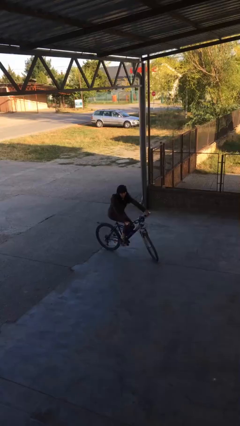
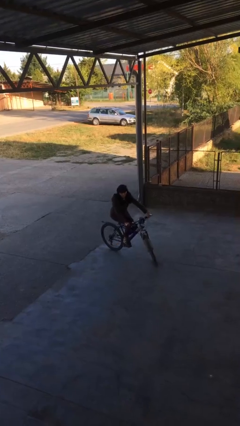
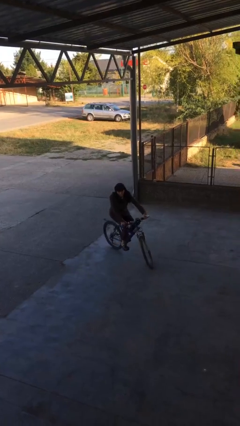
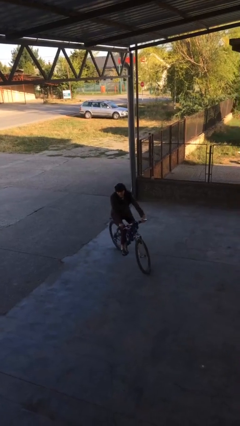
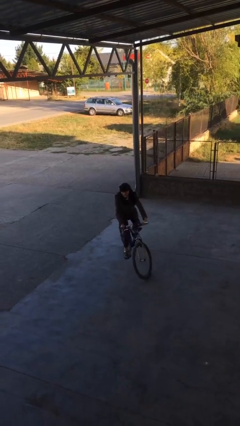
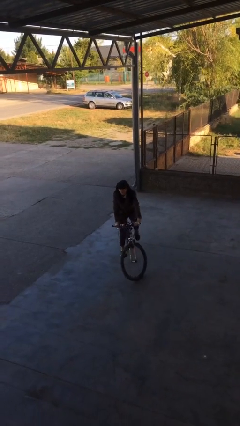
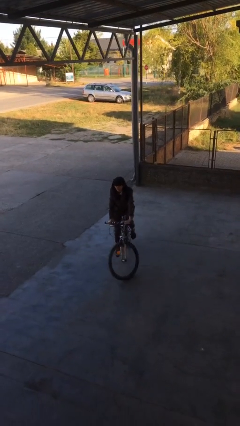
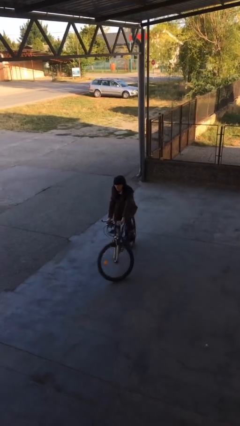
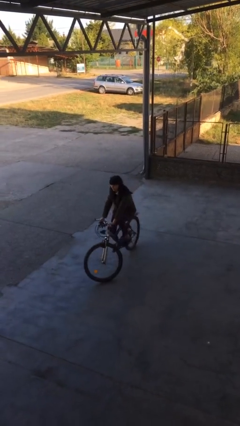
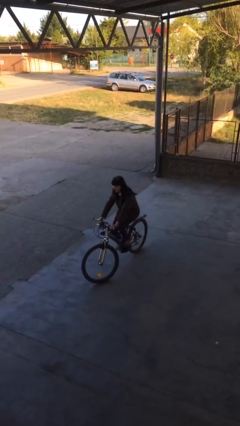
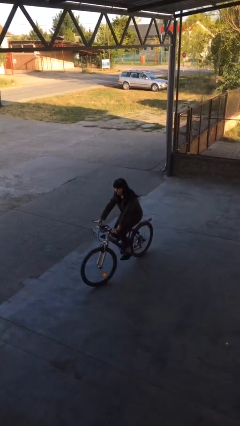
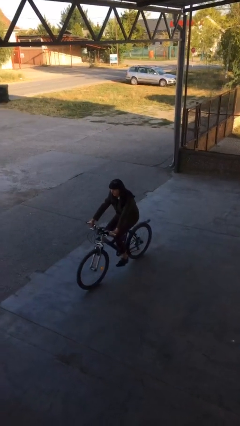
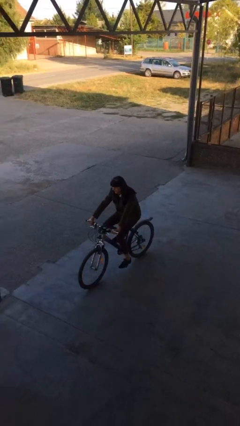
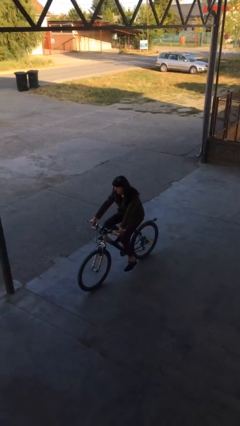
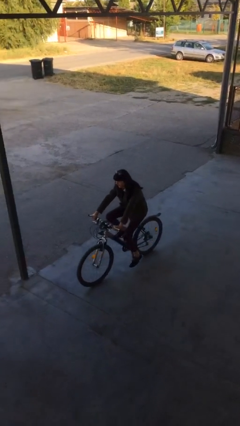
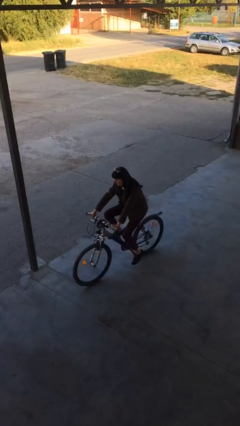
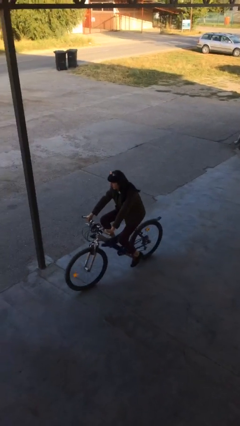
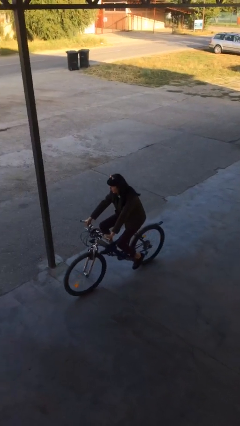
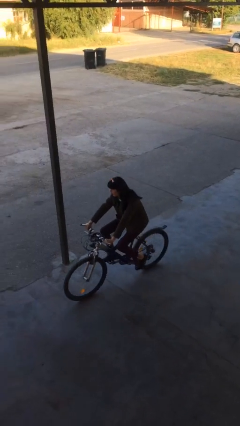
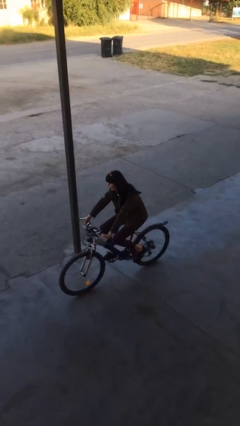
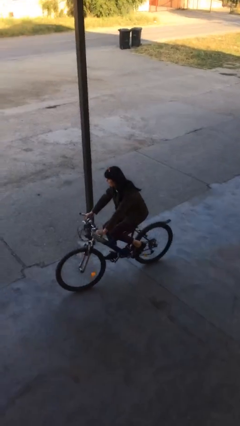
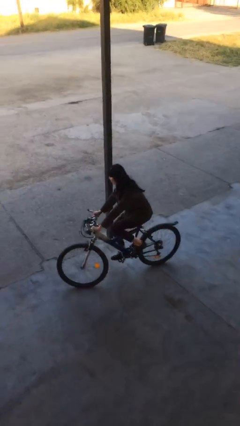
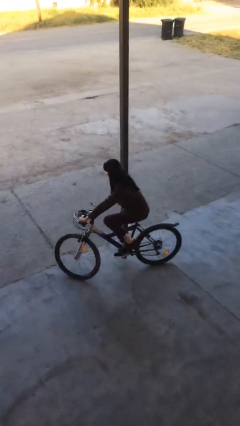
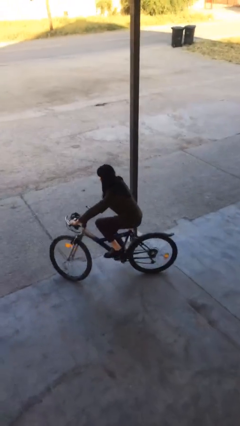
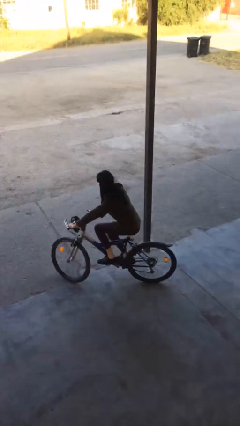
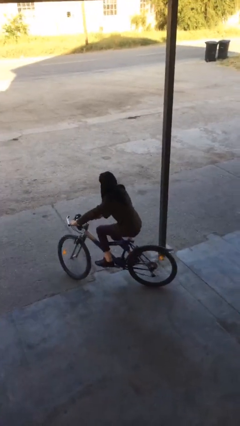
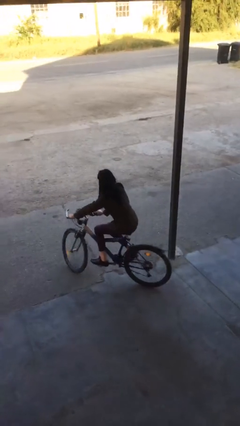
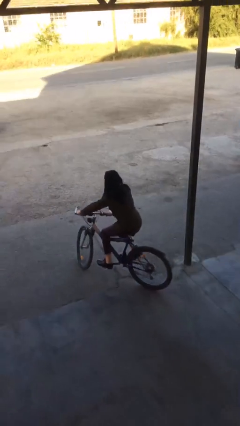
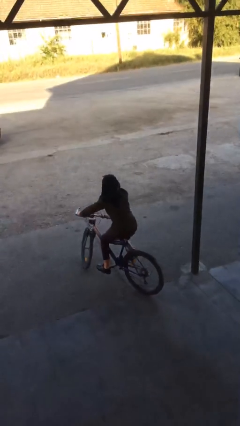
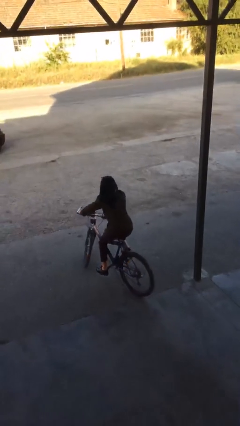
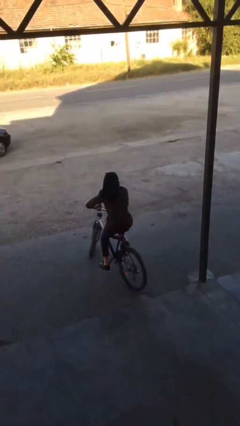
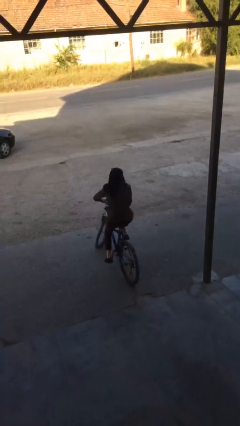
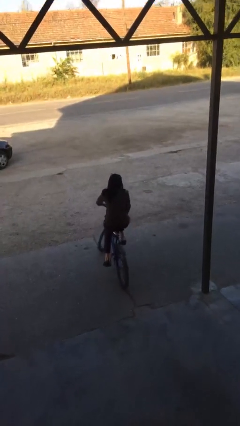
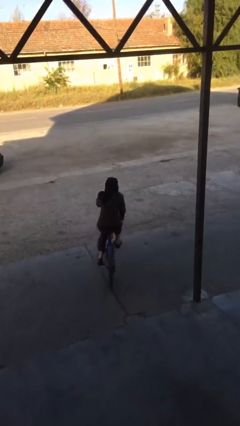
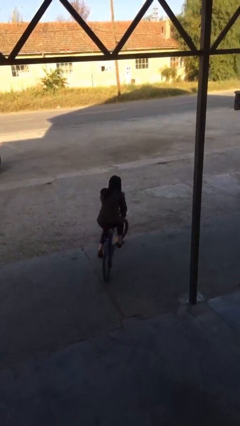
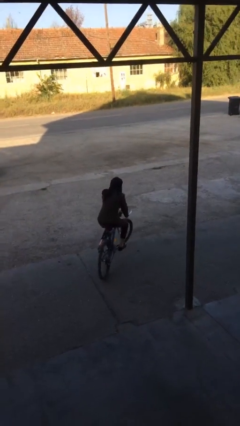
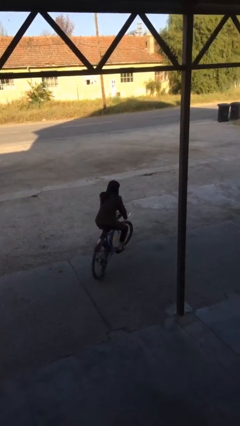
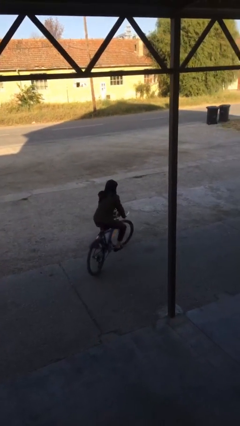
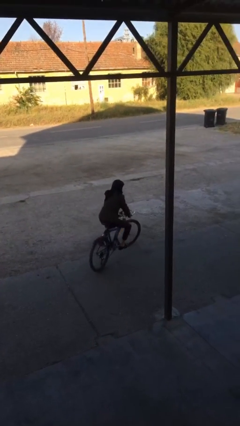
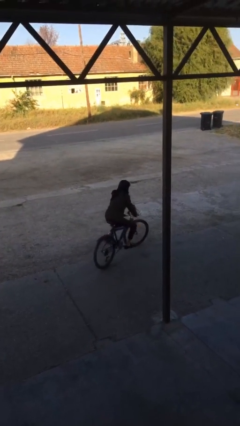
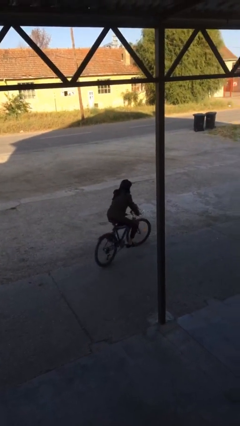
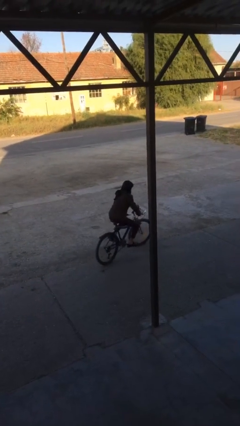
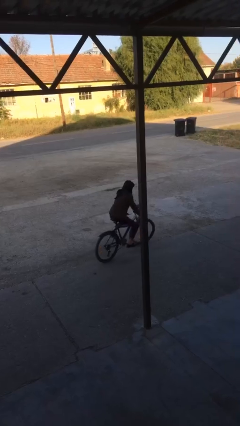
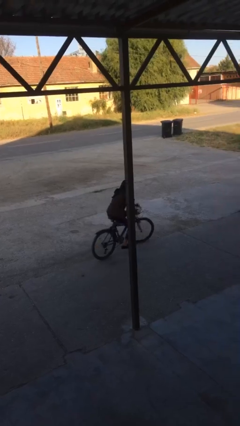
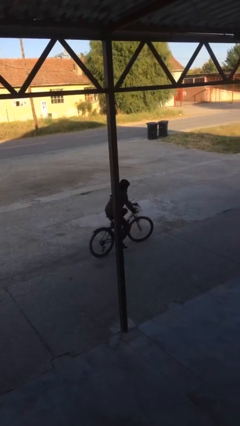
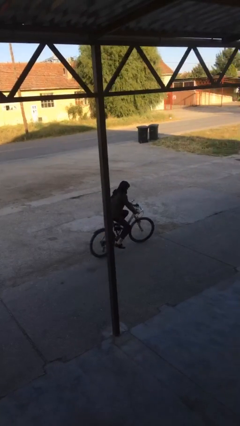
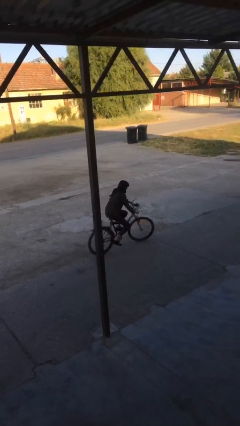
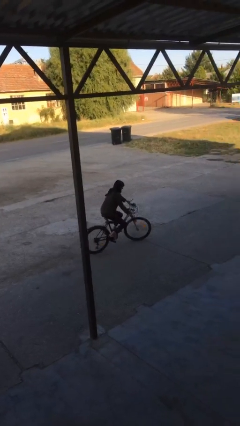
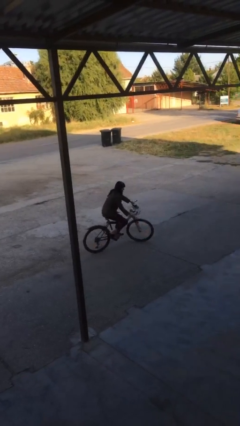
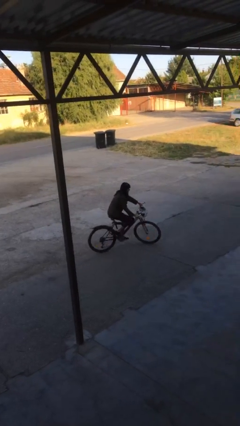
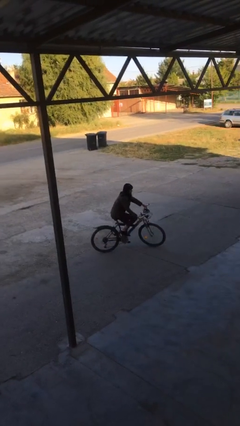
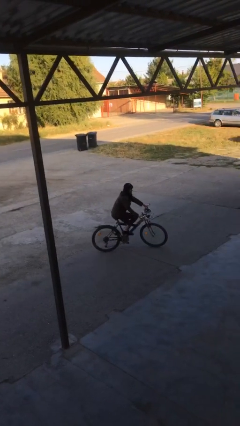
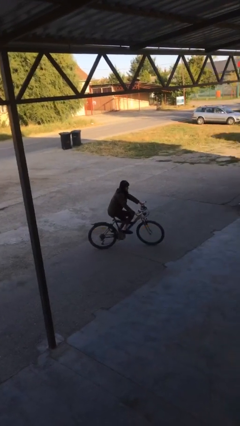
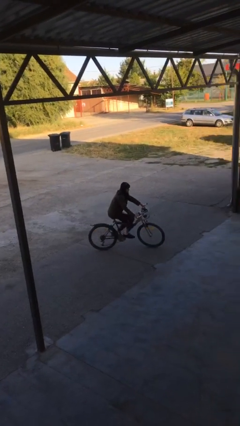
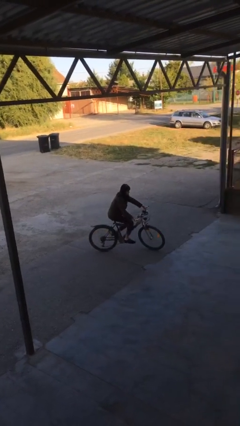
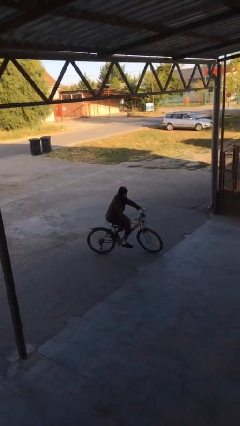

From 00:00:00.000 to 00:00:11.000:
person rides bicycle

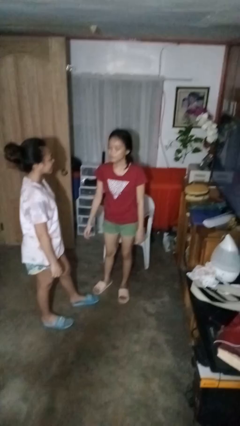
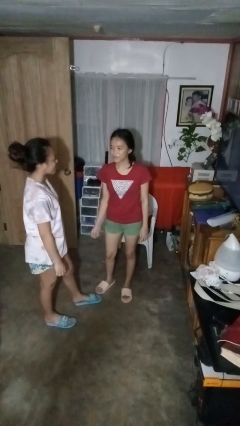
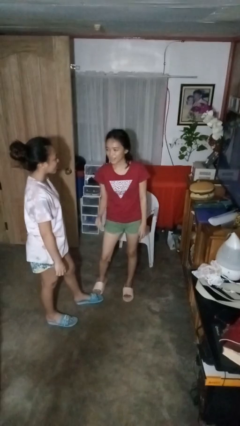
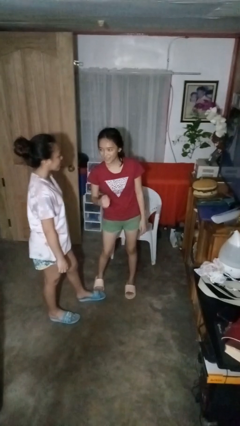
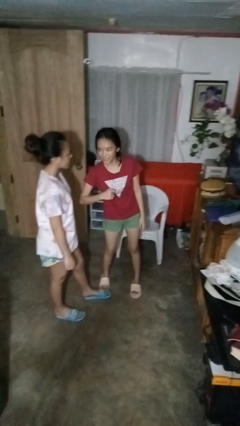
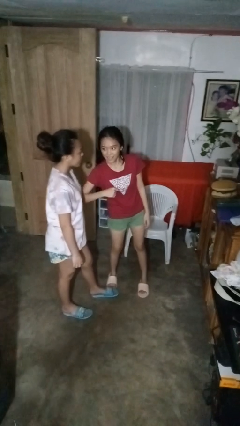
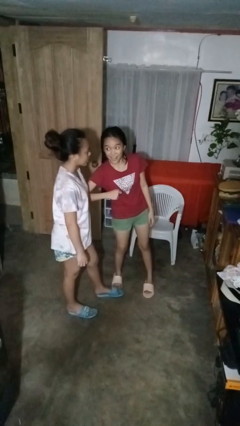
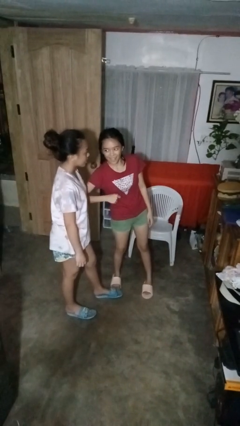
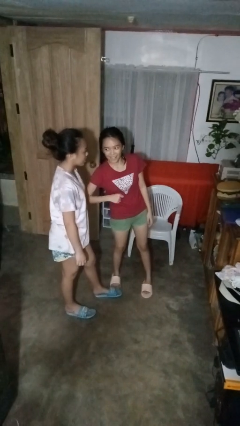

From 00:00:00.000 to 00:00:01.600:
person nudges person with elbow

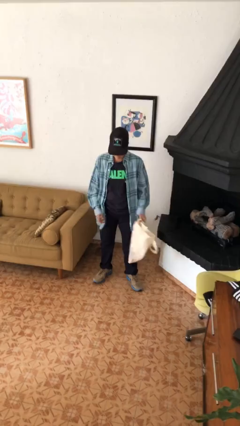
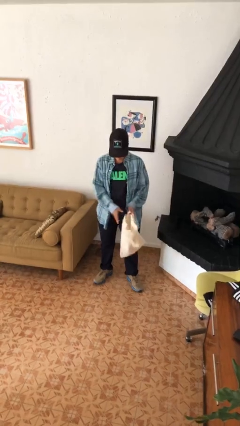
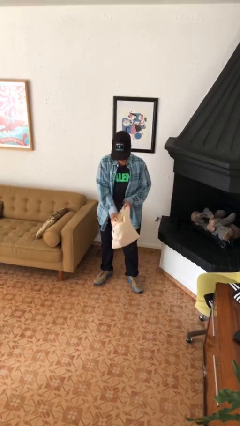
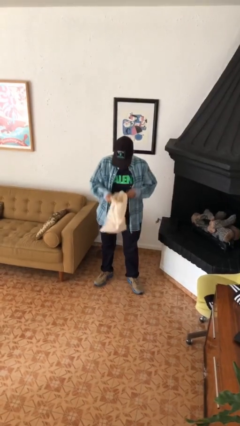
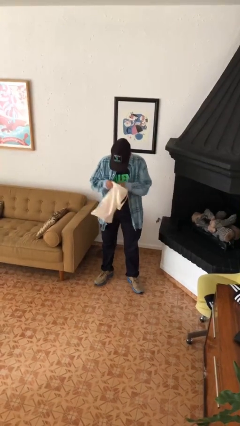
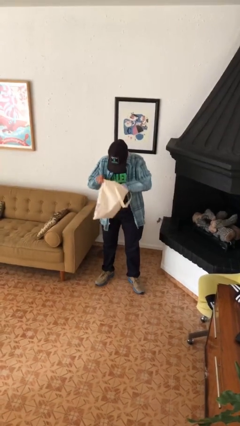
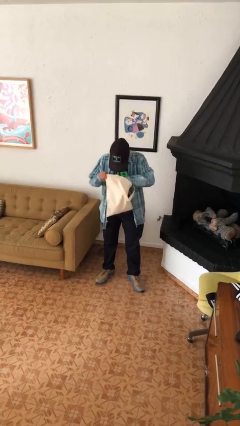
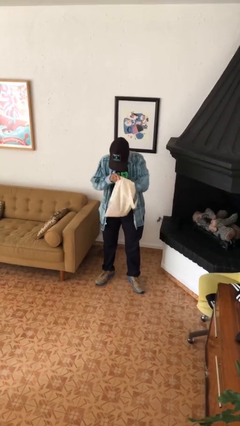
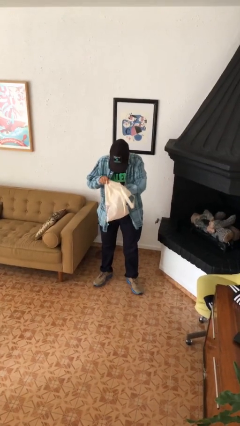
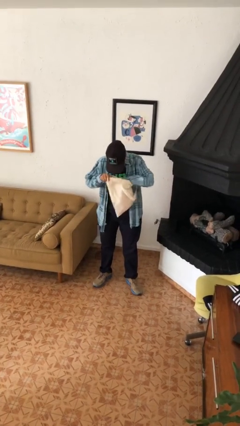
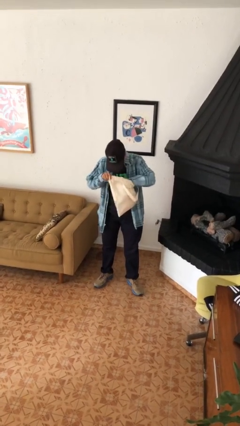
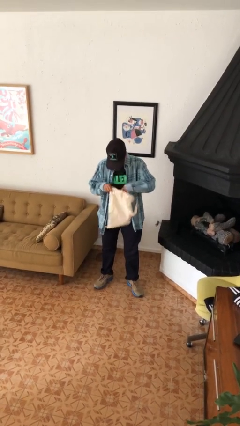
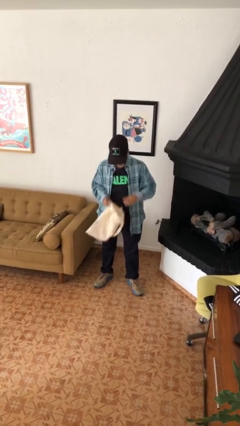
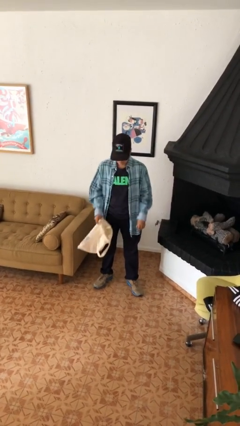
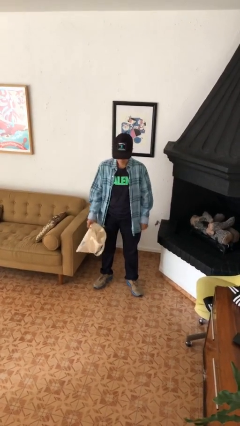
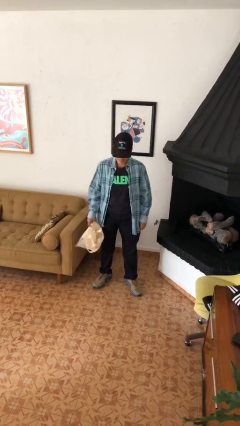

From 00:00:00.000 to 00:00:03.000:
person searches in bag

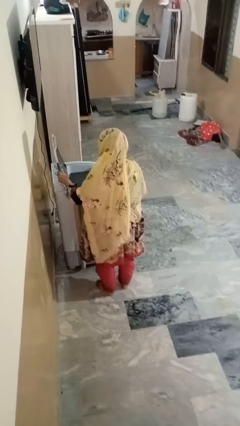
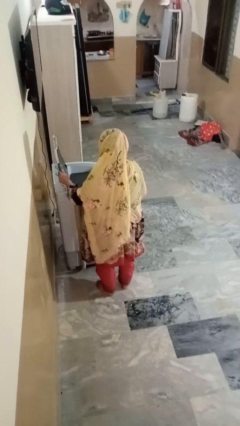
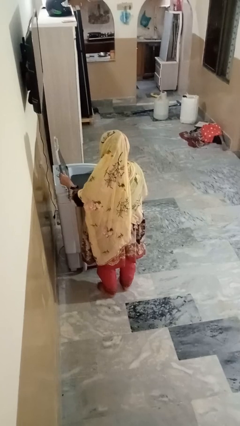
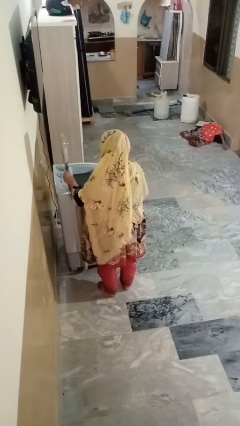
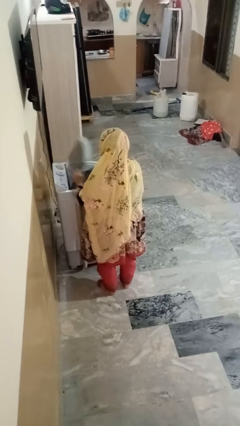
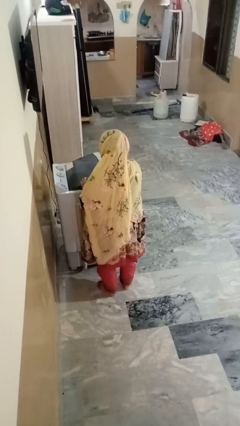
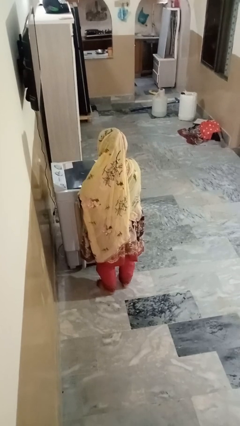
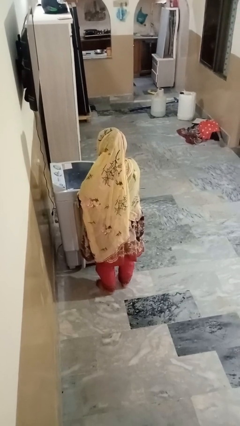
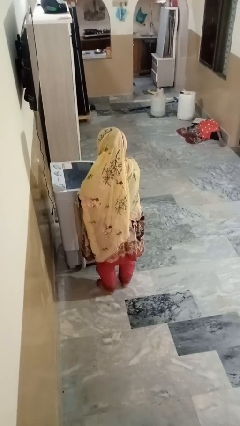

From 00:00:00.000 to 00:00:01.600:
person closes clothes washer

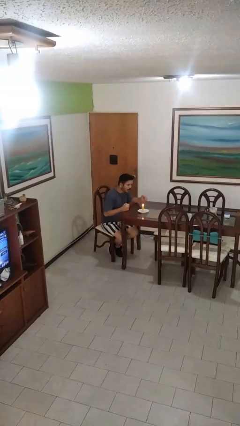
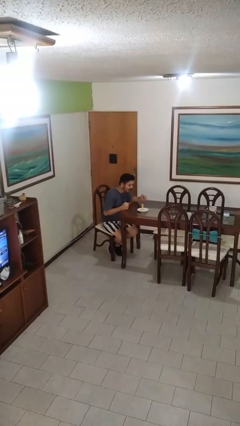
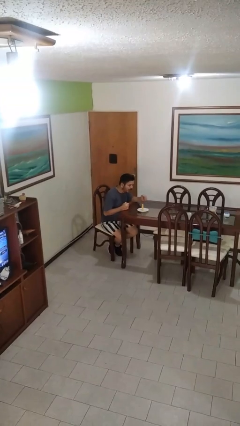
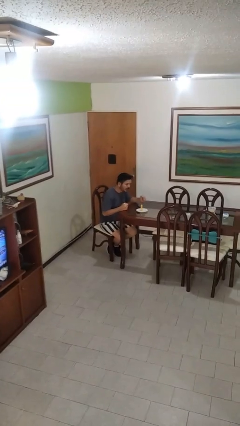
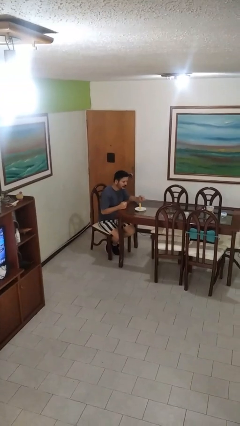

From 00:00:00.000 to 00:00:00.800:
person extinguishes candle
